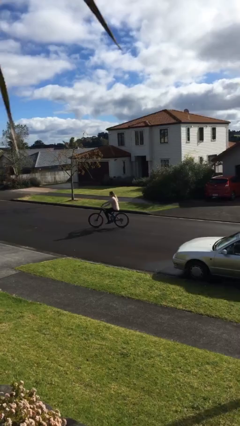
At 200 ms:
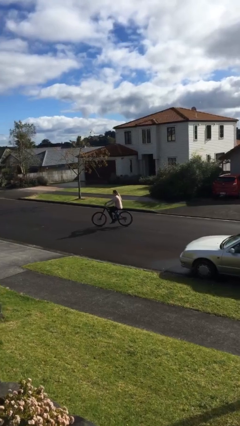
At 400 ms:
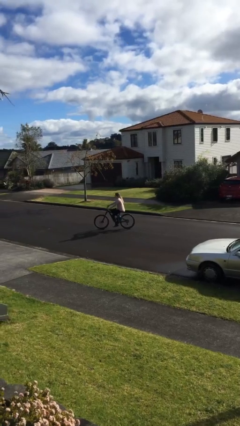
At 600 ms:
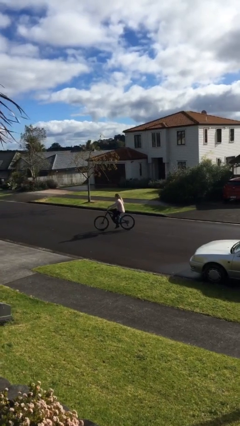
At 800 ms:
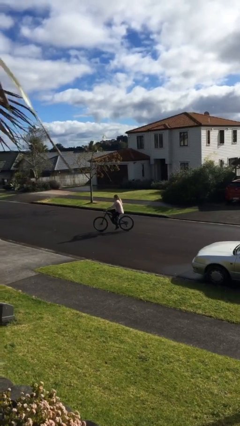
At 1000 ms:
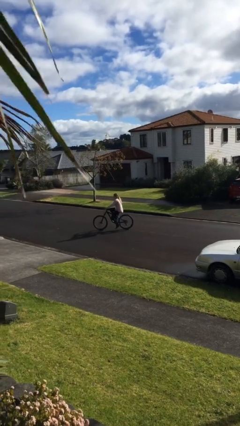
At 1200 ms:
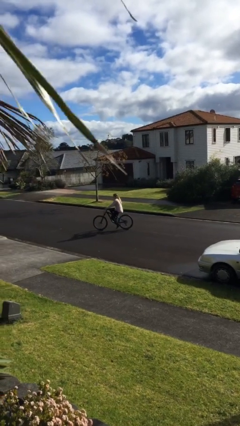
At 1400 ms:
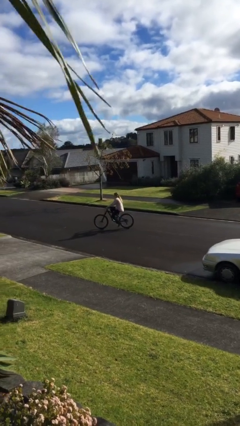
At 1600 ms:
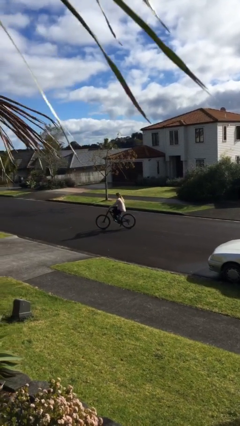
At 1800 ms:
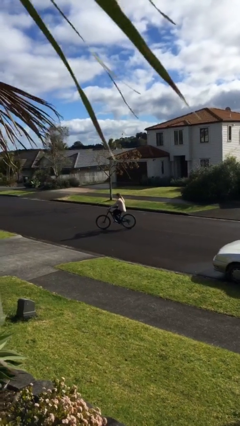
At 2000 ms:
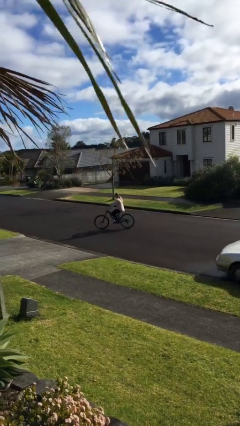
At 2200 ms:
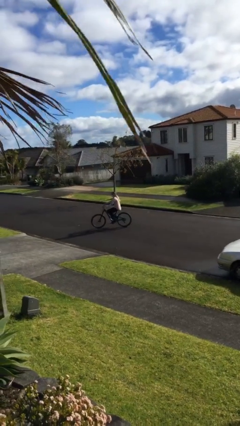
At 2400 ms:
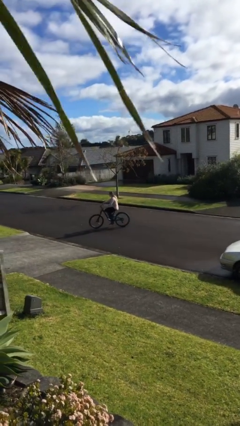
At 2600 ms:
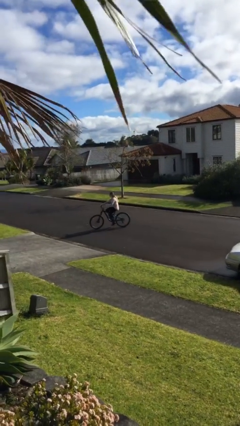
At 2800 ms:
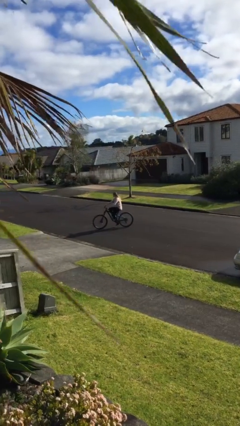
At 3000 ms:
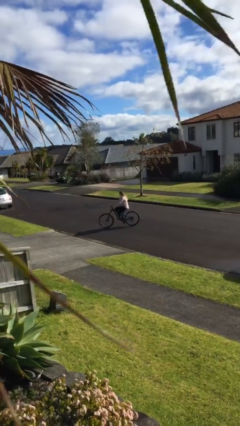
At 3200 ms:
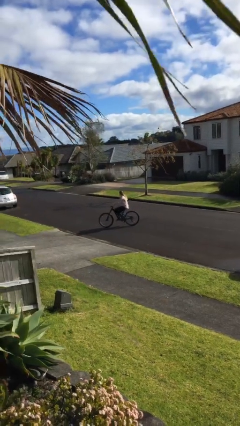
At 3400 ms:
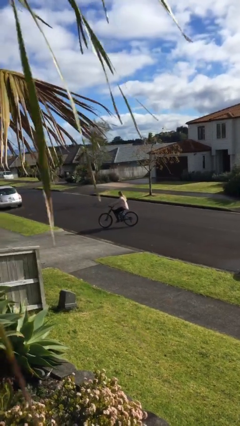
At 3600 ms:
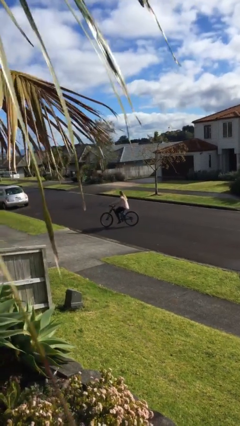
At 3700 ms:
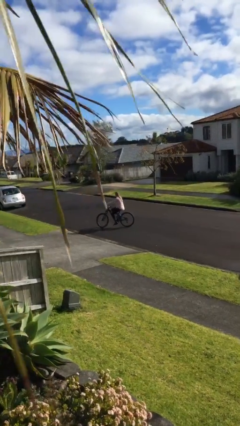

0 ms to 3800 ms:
person rides bicycle

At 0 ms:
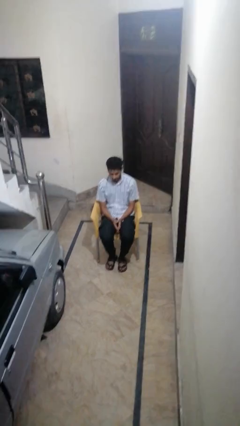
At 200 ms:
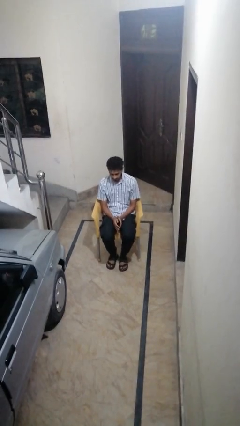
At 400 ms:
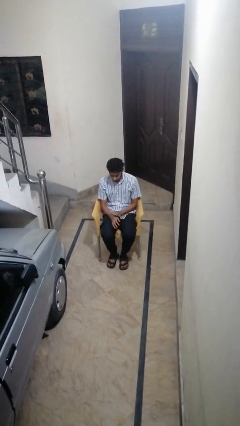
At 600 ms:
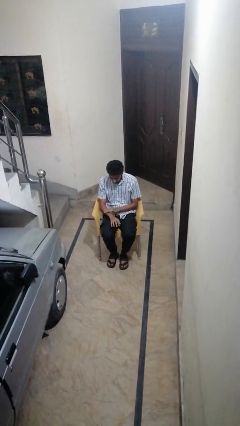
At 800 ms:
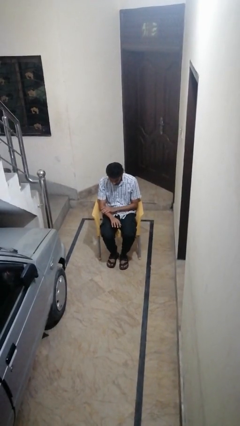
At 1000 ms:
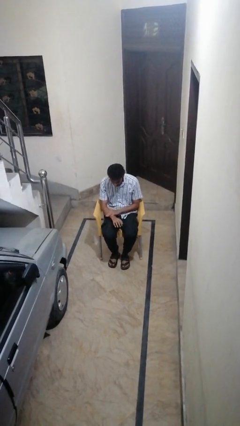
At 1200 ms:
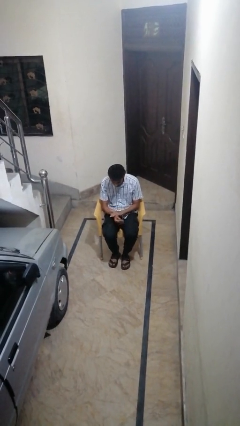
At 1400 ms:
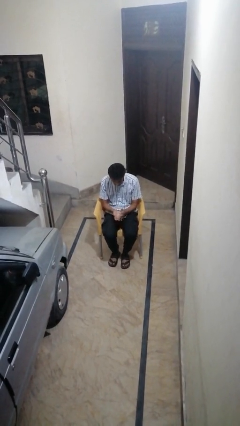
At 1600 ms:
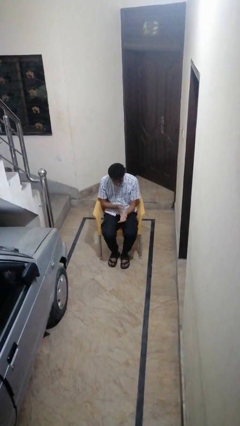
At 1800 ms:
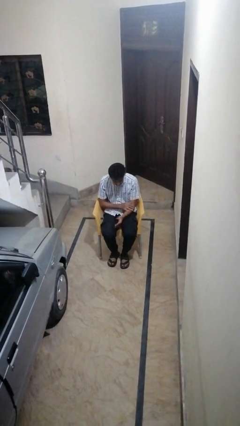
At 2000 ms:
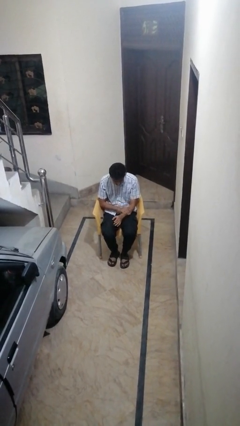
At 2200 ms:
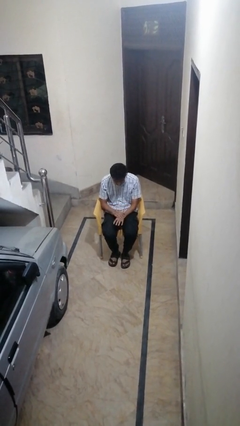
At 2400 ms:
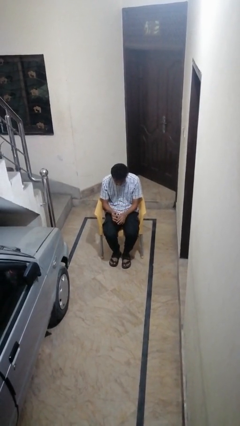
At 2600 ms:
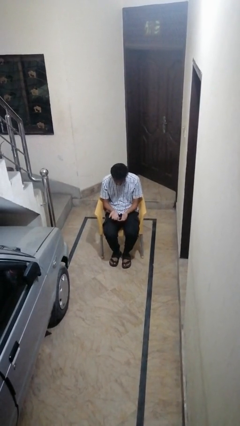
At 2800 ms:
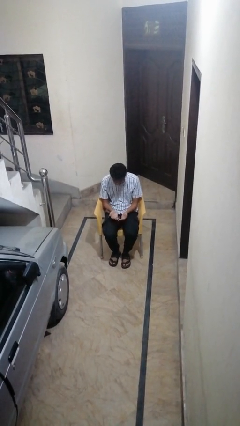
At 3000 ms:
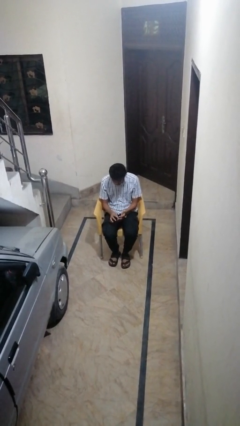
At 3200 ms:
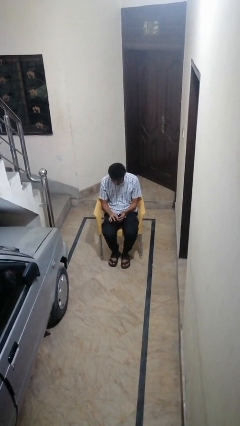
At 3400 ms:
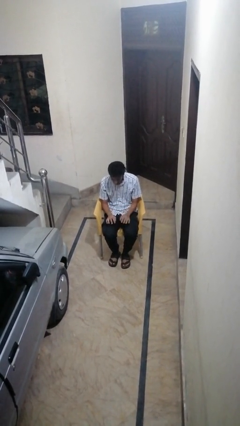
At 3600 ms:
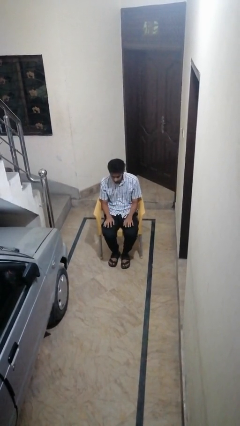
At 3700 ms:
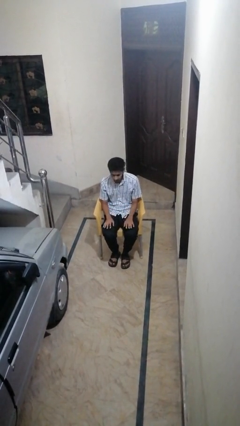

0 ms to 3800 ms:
person looks at hands in lap

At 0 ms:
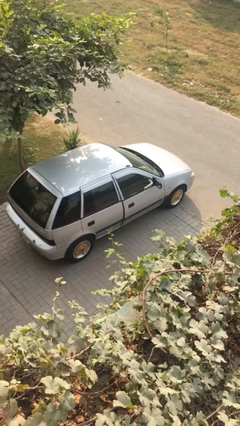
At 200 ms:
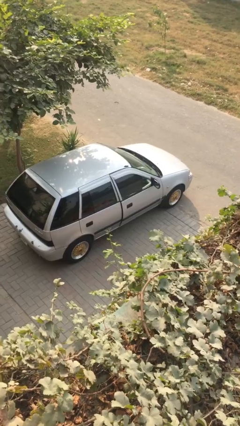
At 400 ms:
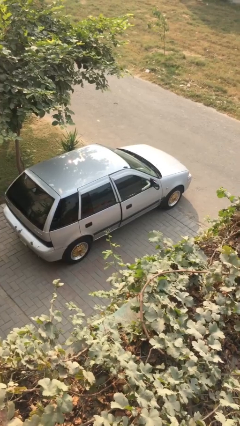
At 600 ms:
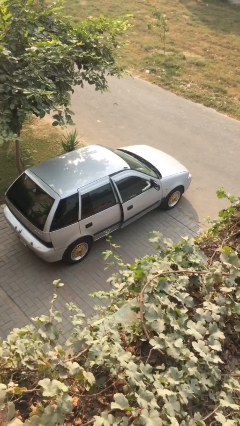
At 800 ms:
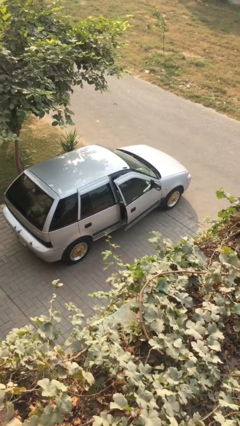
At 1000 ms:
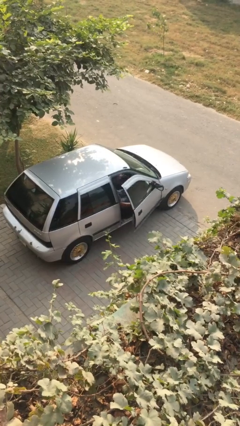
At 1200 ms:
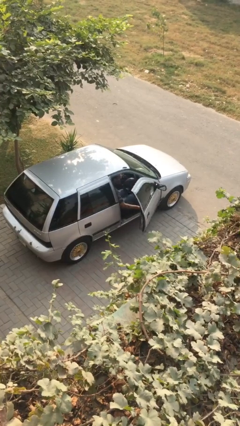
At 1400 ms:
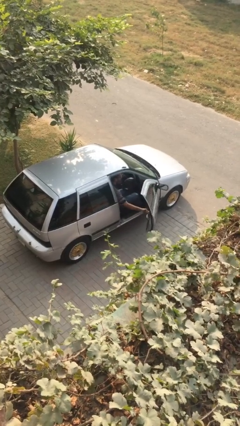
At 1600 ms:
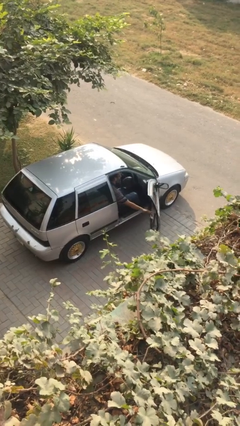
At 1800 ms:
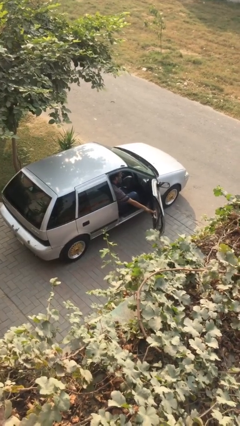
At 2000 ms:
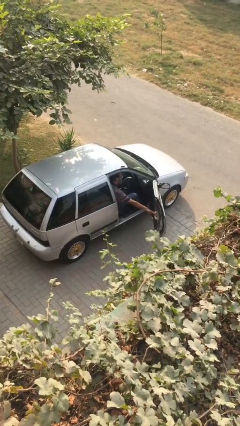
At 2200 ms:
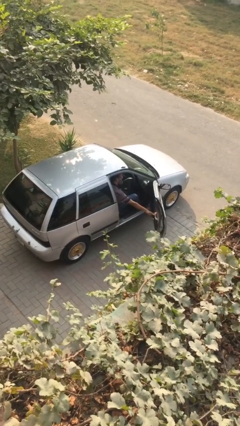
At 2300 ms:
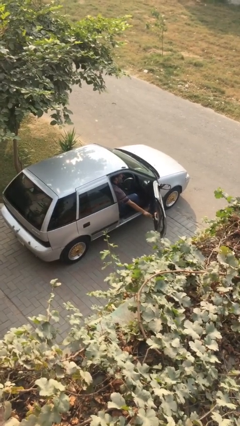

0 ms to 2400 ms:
person opens car door

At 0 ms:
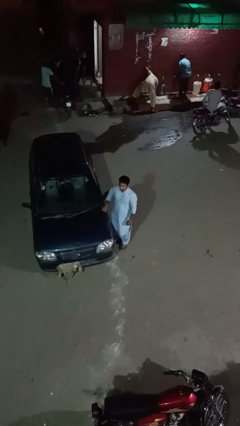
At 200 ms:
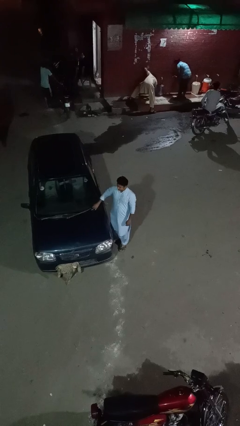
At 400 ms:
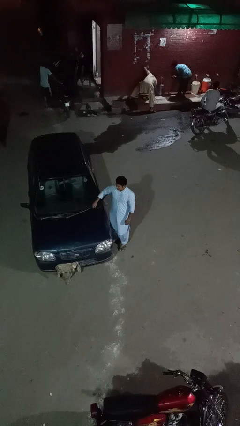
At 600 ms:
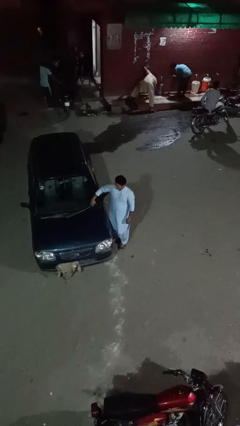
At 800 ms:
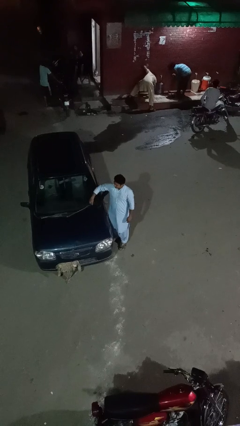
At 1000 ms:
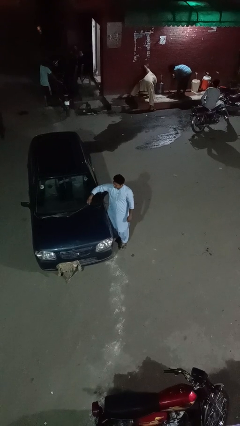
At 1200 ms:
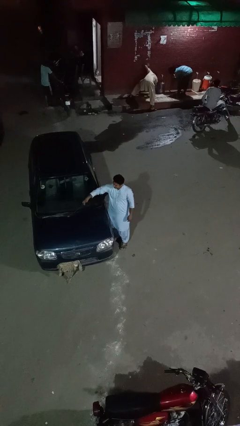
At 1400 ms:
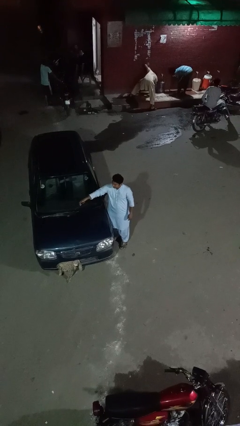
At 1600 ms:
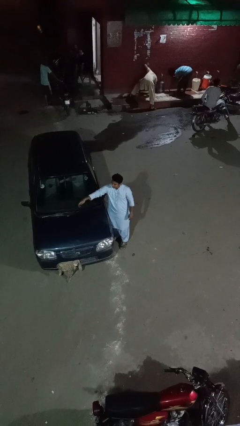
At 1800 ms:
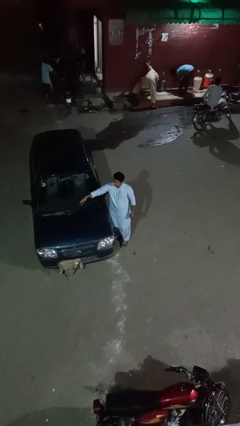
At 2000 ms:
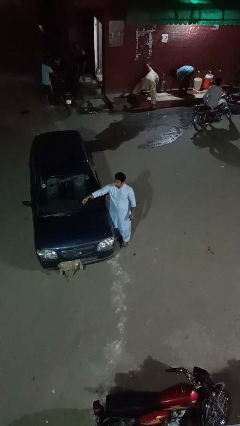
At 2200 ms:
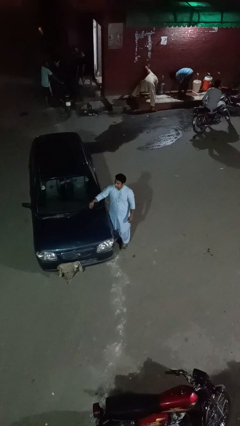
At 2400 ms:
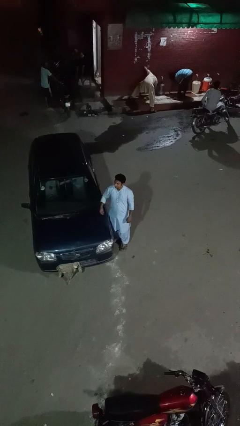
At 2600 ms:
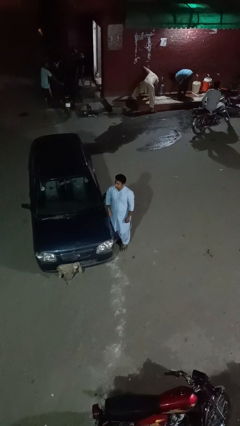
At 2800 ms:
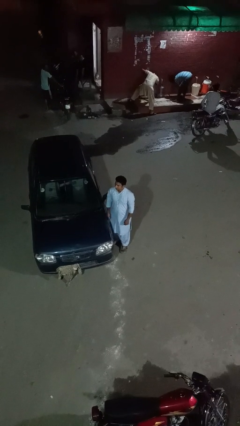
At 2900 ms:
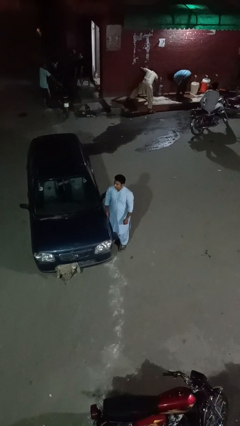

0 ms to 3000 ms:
person flips up car wipers

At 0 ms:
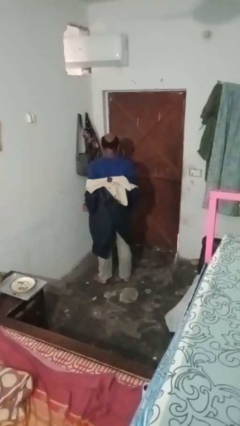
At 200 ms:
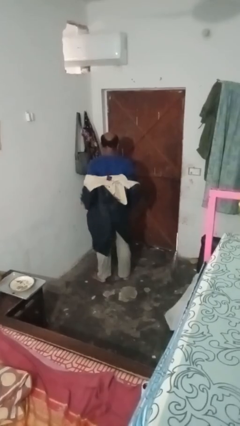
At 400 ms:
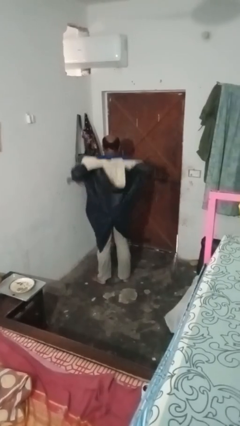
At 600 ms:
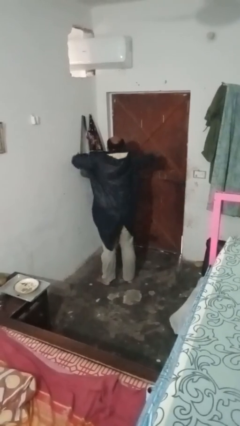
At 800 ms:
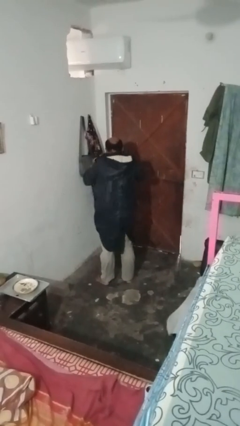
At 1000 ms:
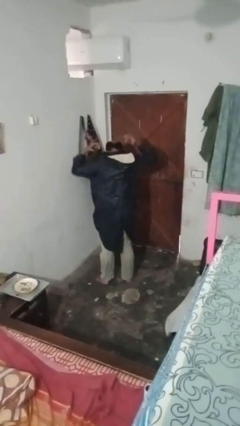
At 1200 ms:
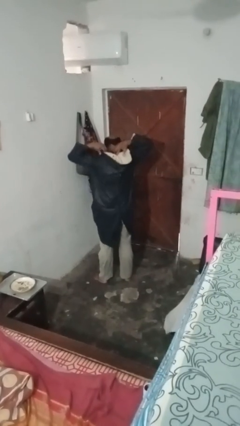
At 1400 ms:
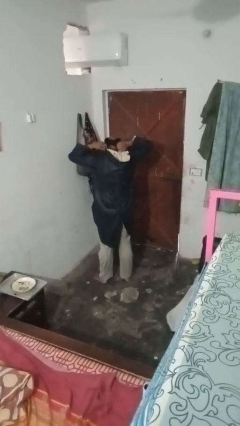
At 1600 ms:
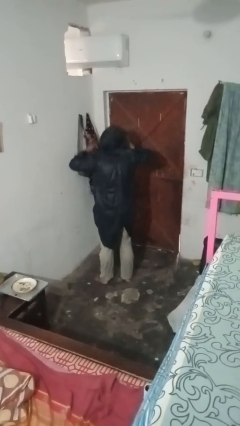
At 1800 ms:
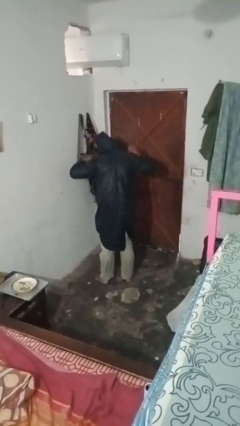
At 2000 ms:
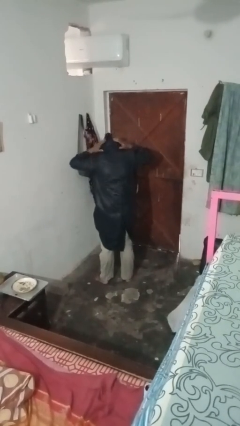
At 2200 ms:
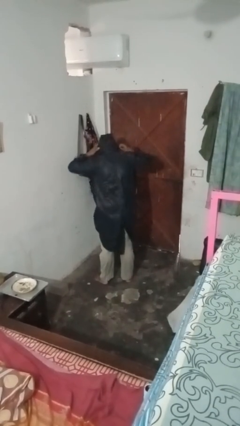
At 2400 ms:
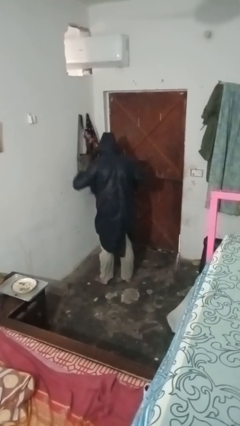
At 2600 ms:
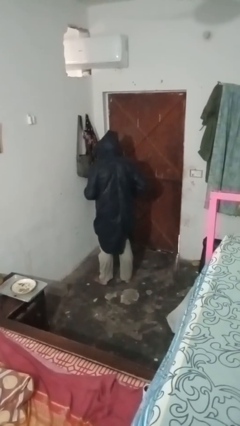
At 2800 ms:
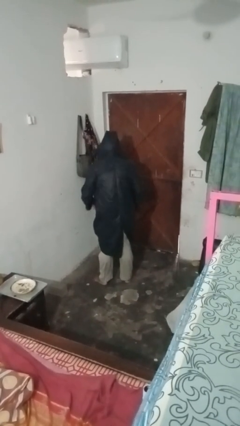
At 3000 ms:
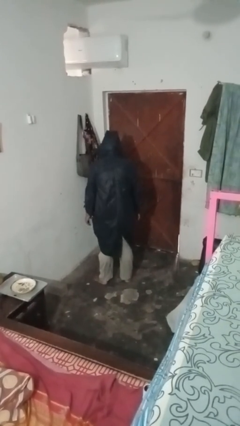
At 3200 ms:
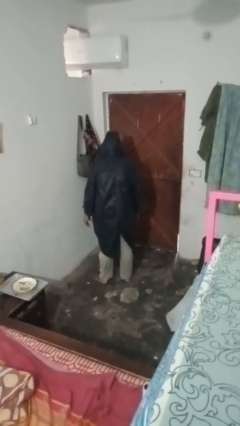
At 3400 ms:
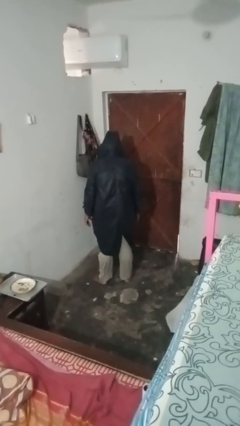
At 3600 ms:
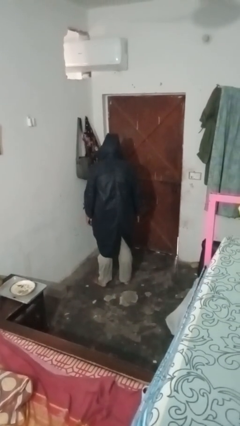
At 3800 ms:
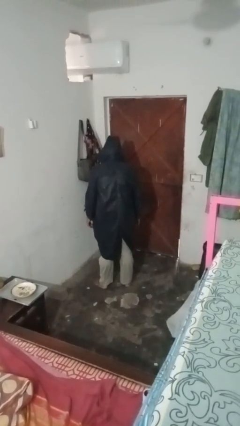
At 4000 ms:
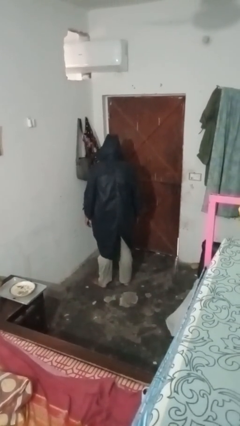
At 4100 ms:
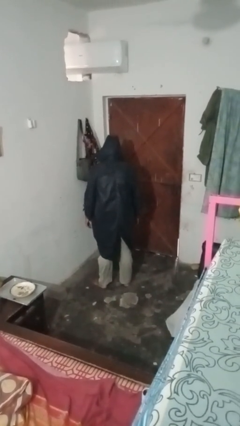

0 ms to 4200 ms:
person puts on hoodie

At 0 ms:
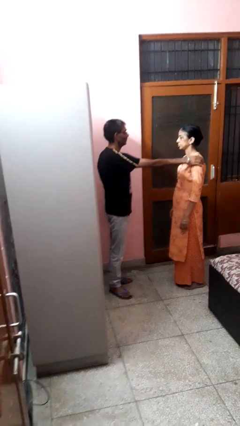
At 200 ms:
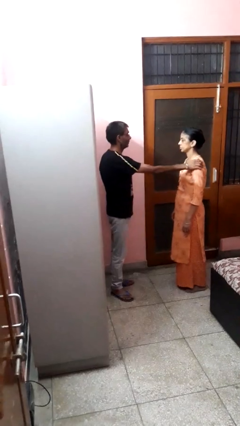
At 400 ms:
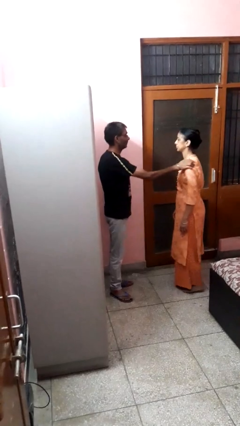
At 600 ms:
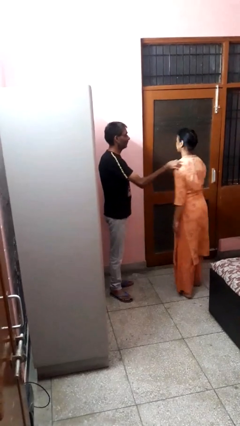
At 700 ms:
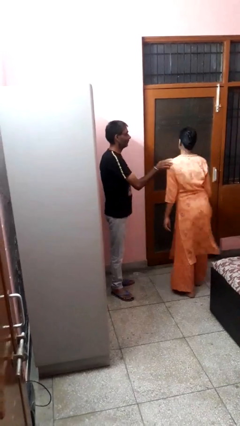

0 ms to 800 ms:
person grabs person by shoulder
